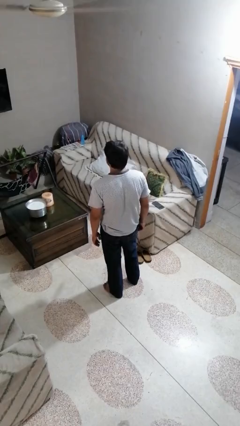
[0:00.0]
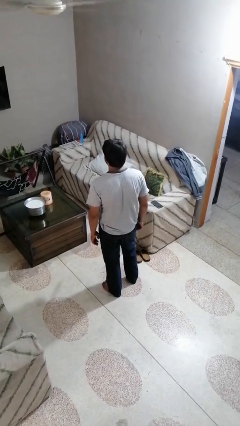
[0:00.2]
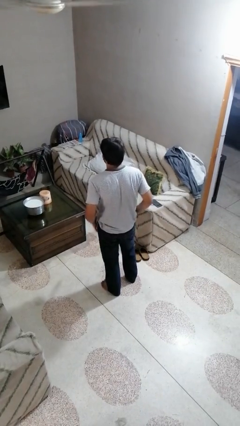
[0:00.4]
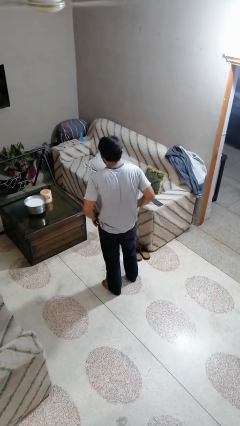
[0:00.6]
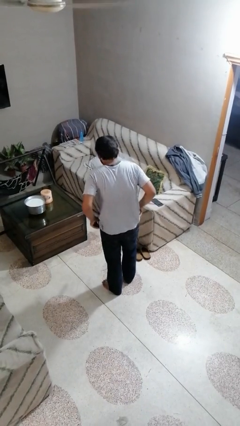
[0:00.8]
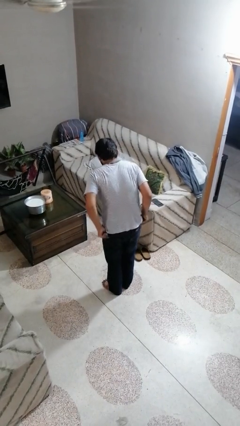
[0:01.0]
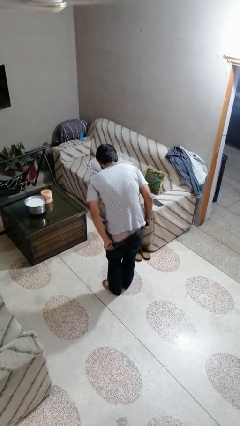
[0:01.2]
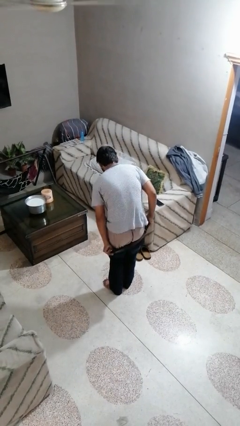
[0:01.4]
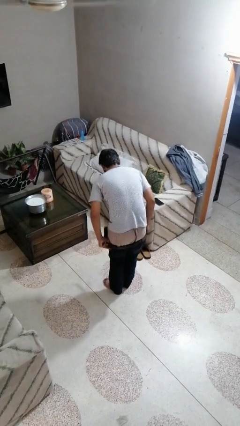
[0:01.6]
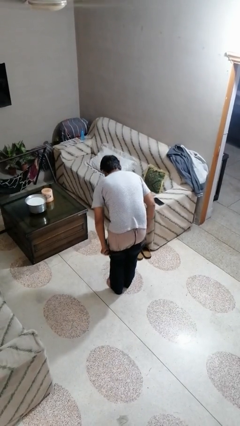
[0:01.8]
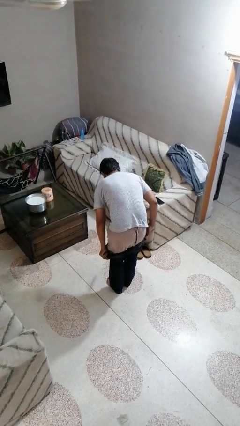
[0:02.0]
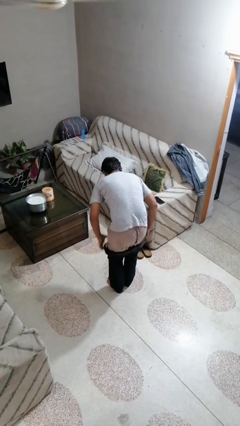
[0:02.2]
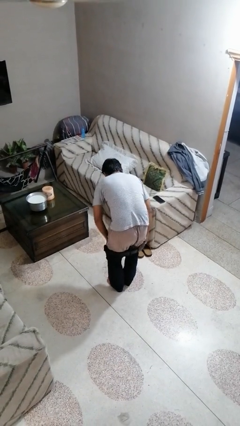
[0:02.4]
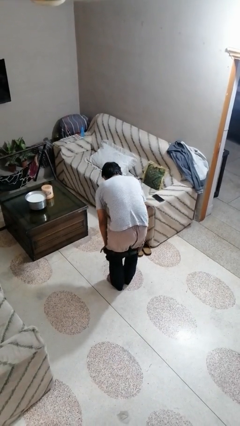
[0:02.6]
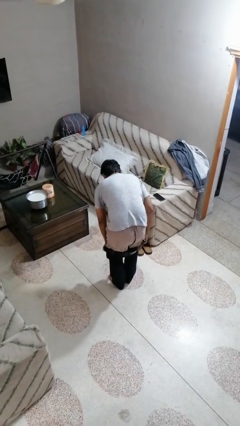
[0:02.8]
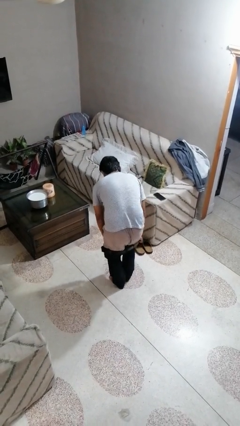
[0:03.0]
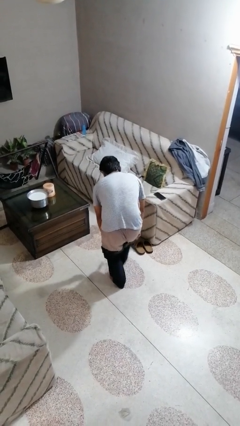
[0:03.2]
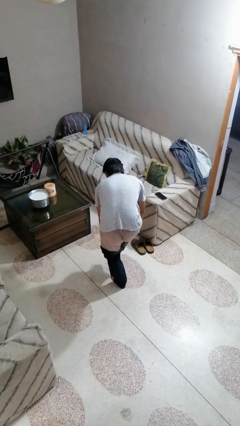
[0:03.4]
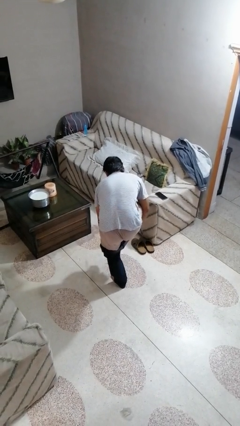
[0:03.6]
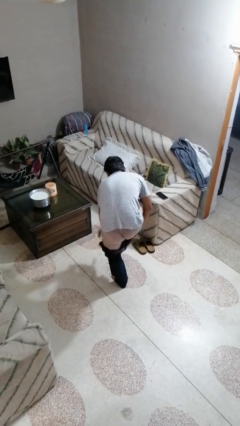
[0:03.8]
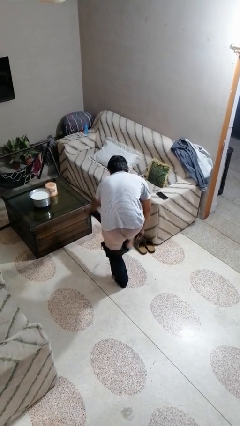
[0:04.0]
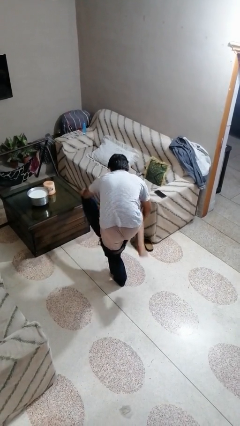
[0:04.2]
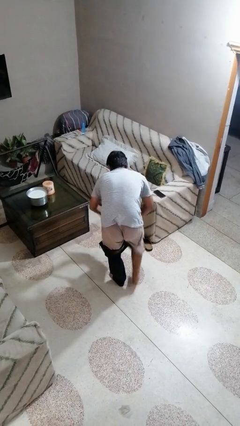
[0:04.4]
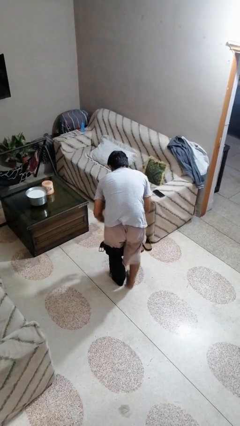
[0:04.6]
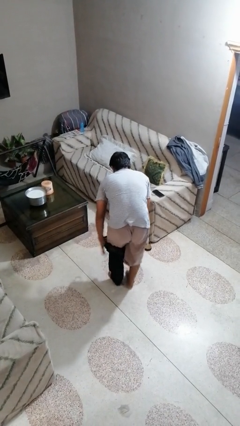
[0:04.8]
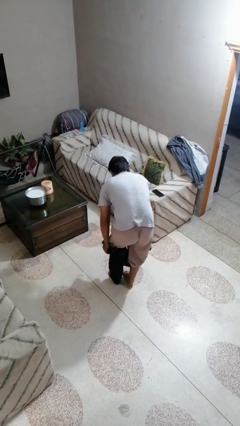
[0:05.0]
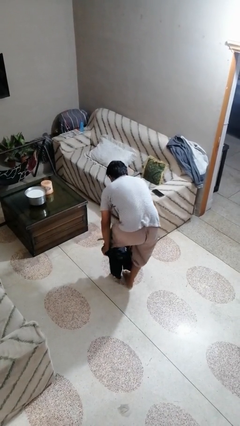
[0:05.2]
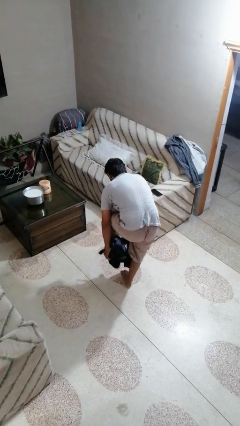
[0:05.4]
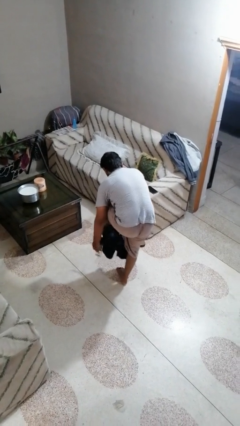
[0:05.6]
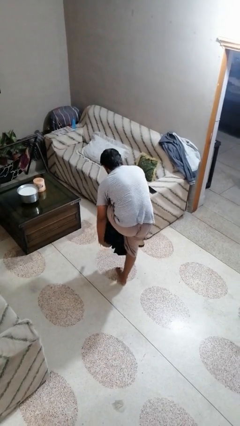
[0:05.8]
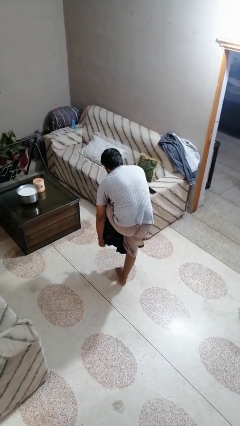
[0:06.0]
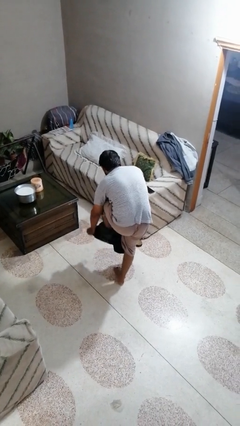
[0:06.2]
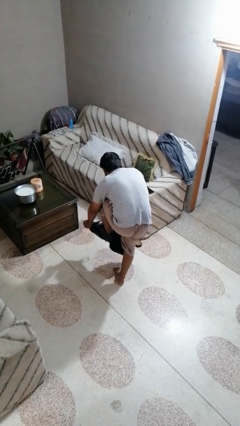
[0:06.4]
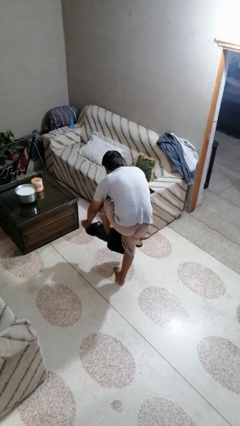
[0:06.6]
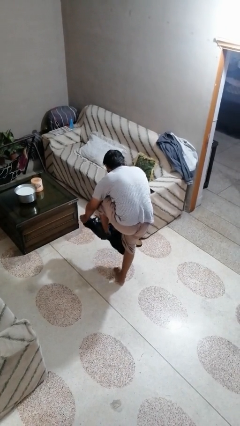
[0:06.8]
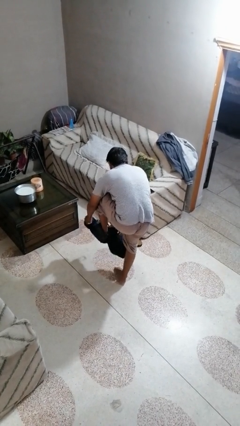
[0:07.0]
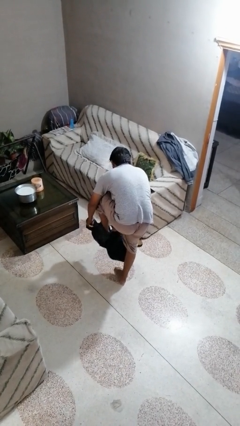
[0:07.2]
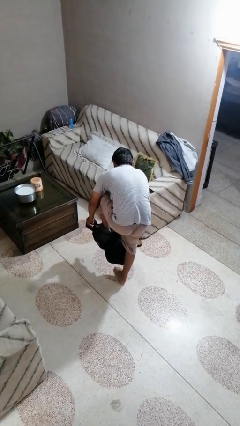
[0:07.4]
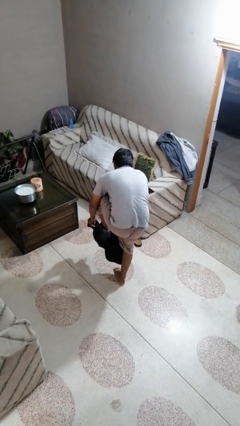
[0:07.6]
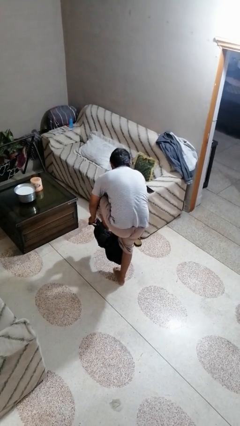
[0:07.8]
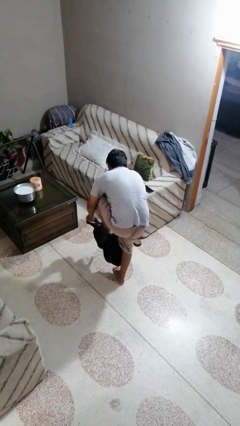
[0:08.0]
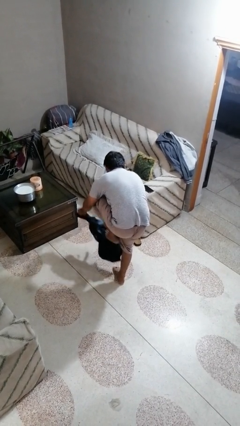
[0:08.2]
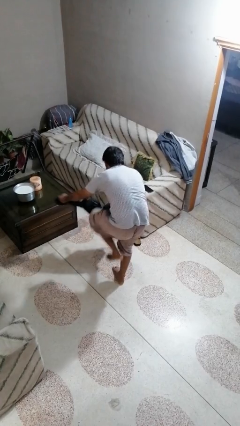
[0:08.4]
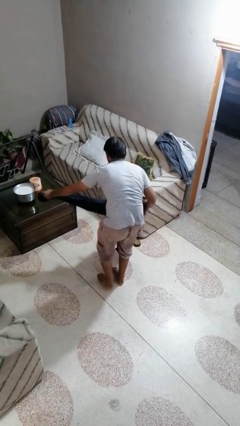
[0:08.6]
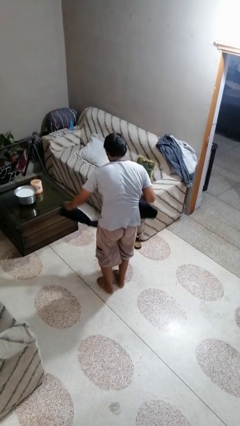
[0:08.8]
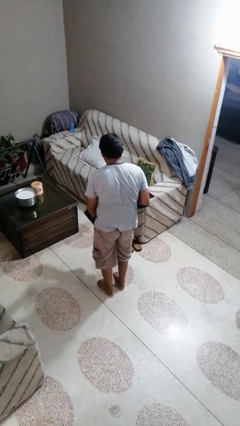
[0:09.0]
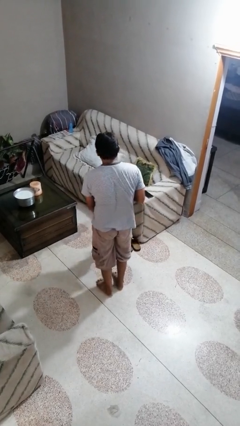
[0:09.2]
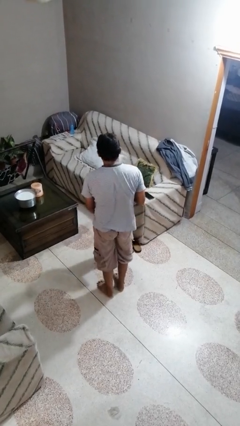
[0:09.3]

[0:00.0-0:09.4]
person takes off pants

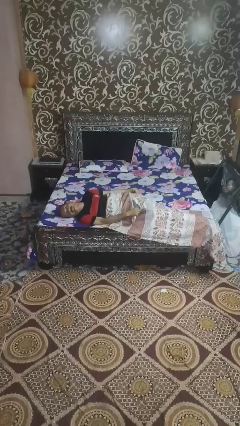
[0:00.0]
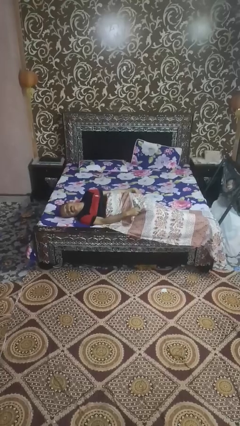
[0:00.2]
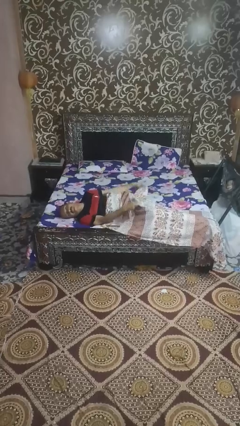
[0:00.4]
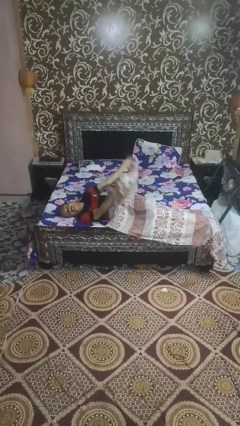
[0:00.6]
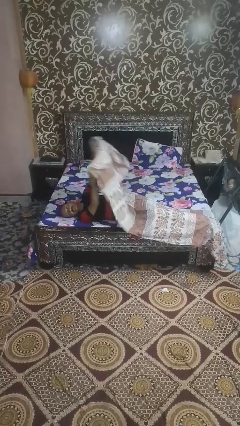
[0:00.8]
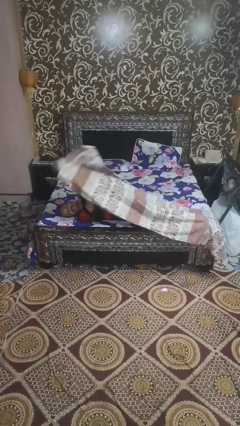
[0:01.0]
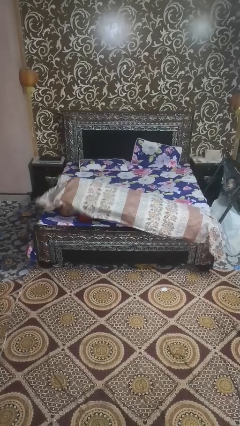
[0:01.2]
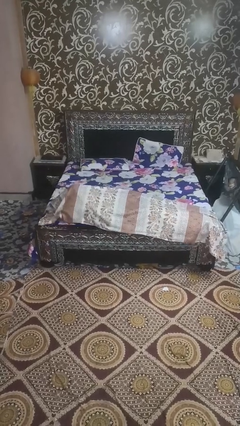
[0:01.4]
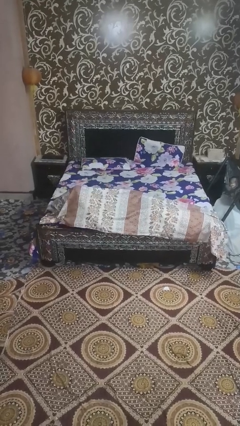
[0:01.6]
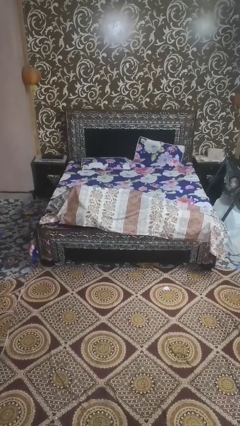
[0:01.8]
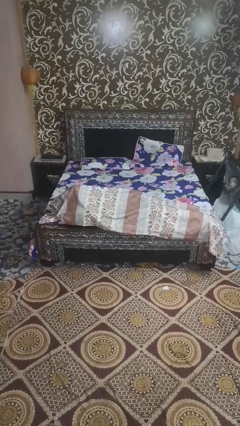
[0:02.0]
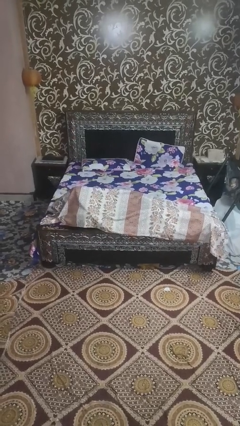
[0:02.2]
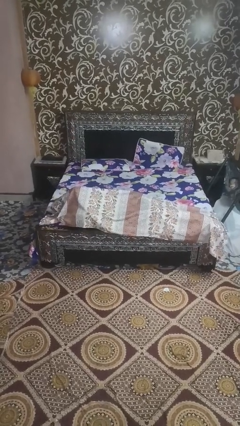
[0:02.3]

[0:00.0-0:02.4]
person covers with bedsheets

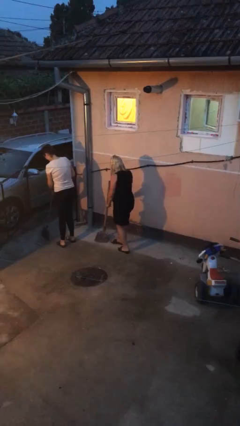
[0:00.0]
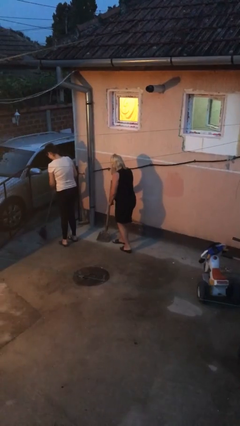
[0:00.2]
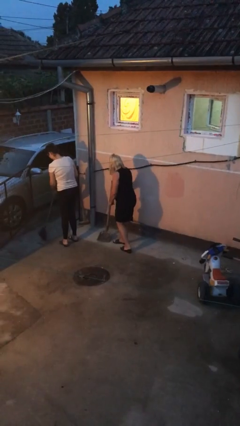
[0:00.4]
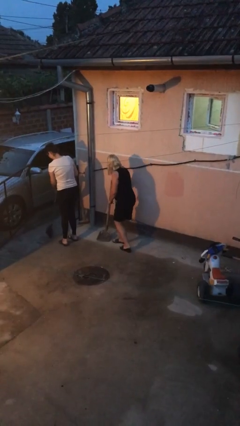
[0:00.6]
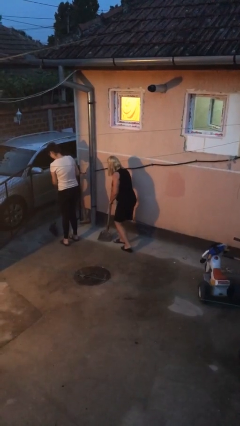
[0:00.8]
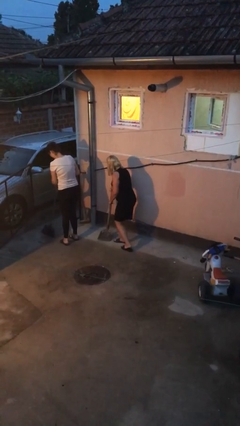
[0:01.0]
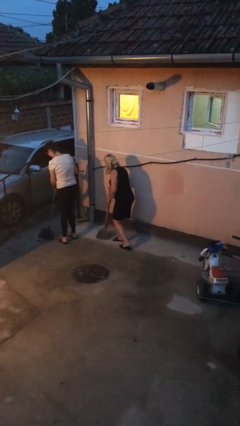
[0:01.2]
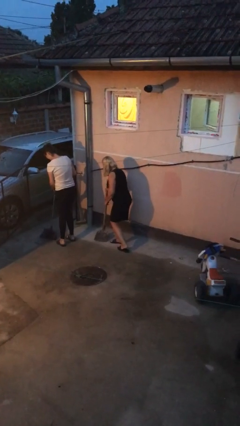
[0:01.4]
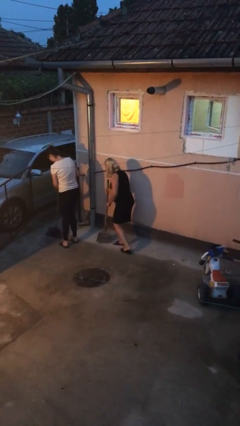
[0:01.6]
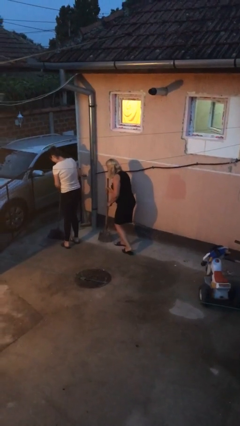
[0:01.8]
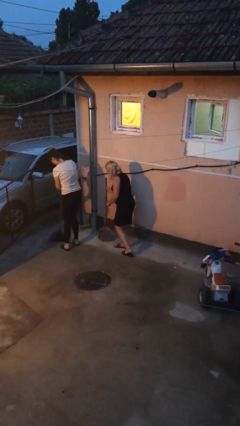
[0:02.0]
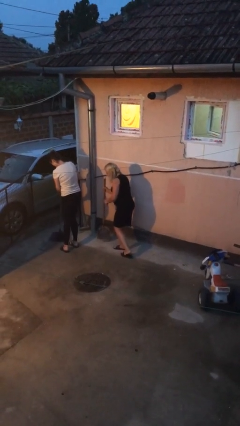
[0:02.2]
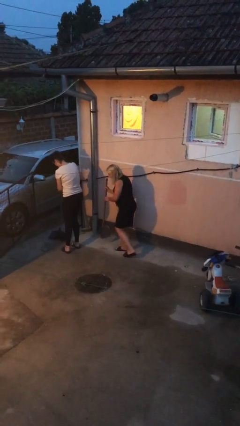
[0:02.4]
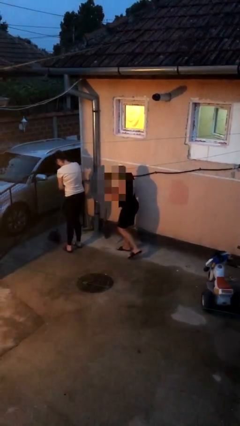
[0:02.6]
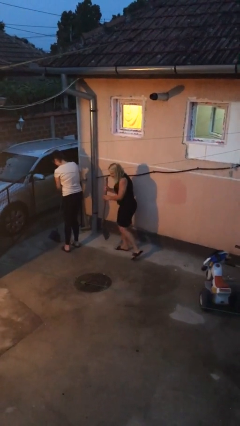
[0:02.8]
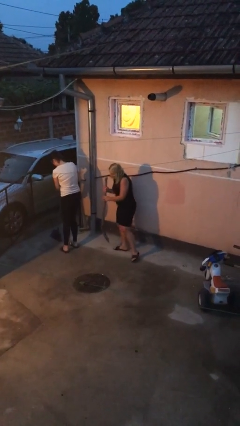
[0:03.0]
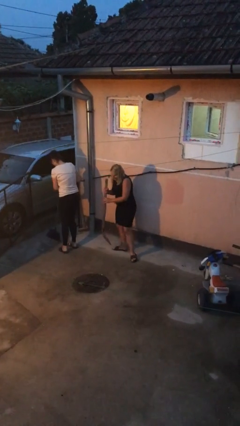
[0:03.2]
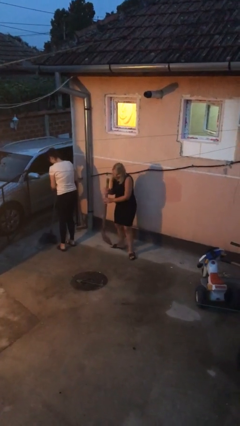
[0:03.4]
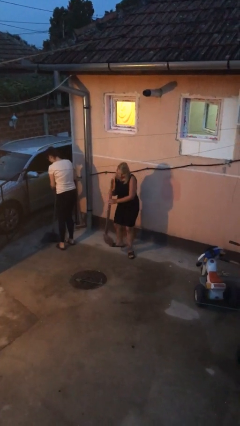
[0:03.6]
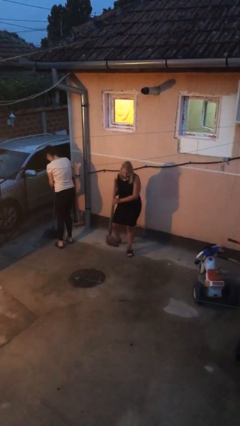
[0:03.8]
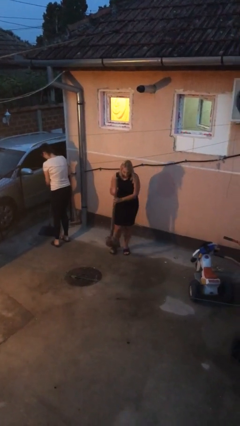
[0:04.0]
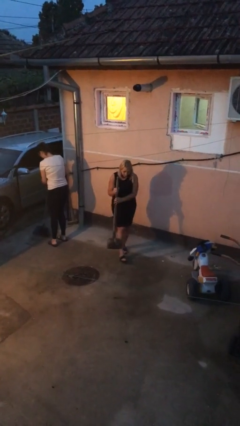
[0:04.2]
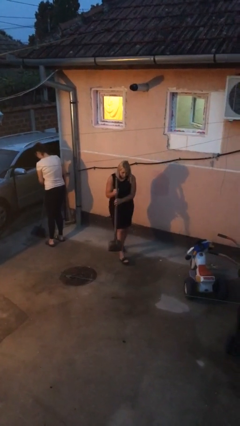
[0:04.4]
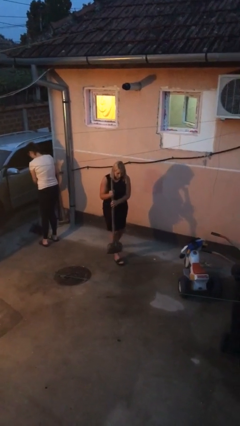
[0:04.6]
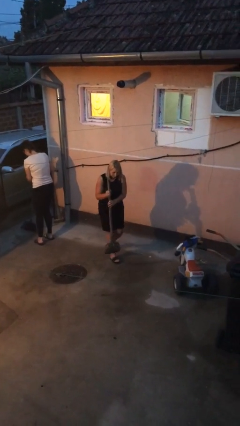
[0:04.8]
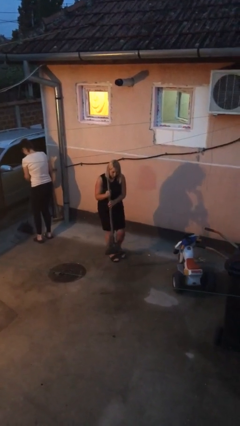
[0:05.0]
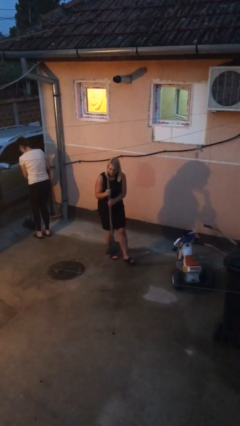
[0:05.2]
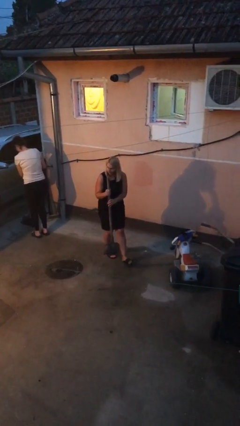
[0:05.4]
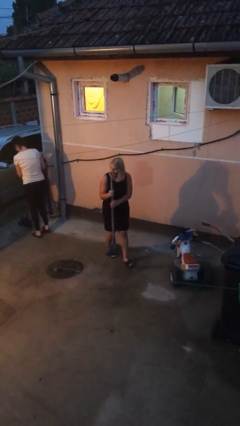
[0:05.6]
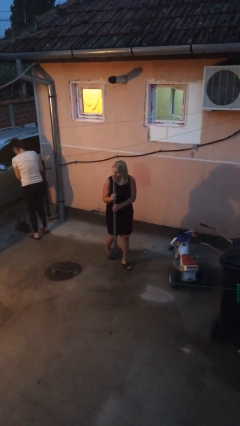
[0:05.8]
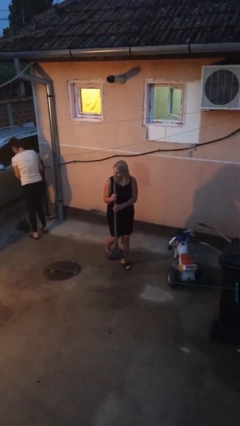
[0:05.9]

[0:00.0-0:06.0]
person steals object from person
